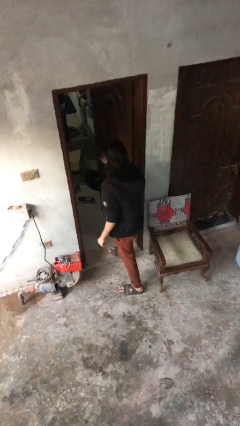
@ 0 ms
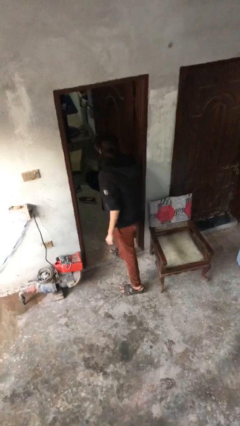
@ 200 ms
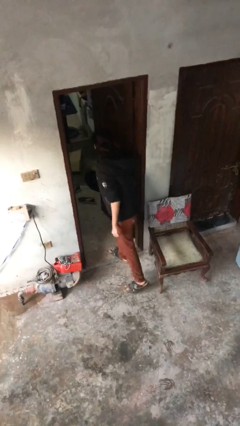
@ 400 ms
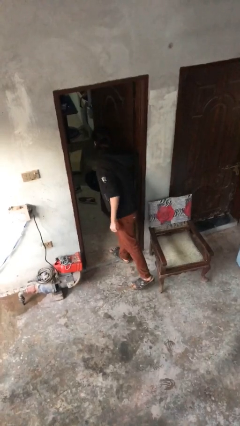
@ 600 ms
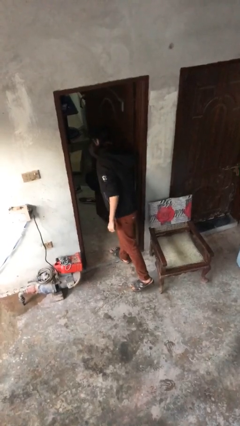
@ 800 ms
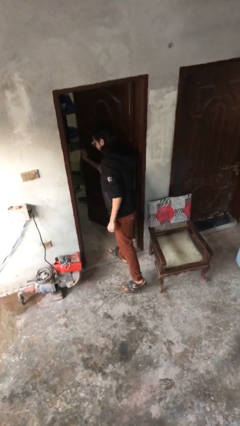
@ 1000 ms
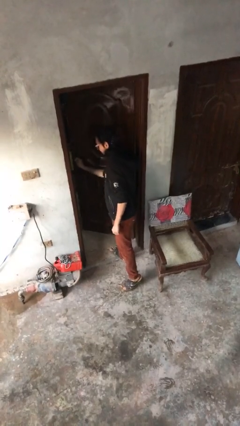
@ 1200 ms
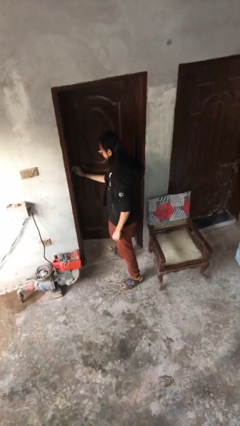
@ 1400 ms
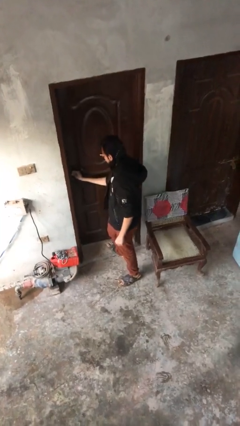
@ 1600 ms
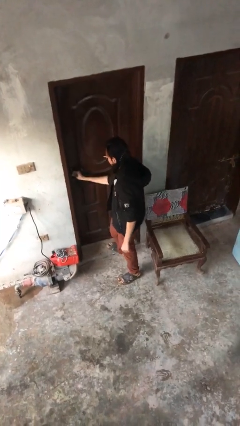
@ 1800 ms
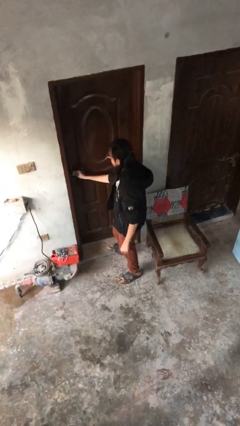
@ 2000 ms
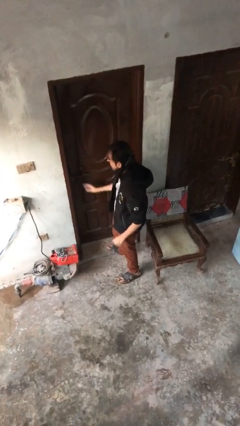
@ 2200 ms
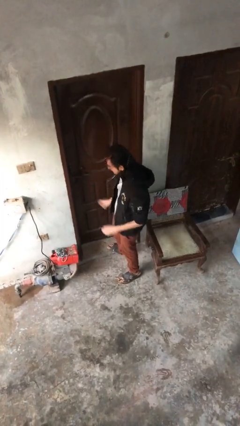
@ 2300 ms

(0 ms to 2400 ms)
person closes facility door

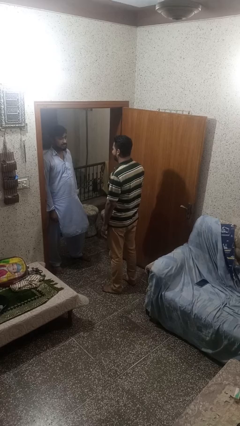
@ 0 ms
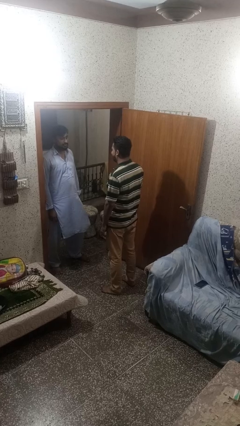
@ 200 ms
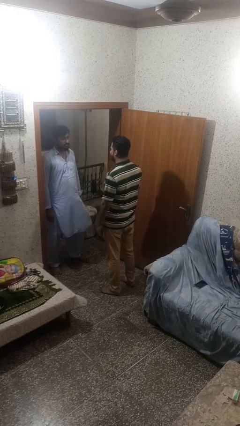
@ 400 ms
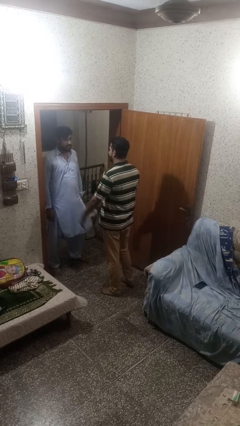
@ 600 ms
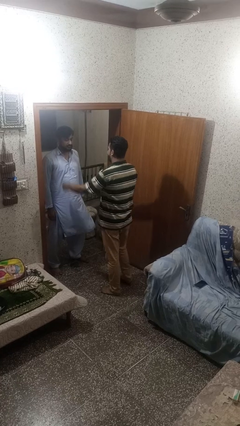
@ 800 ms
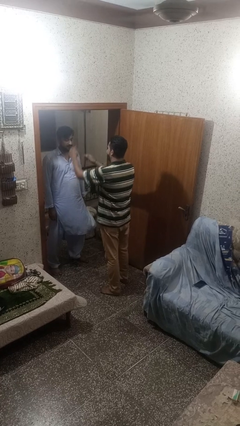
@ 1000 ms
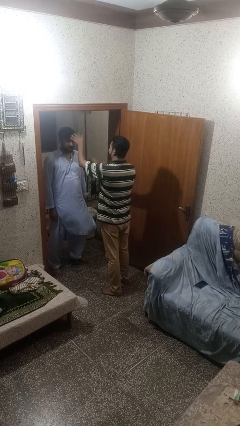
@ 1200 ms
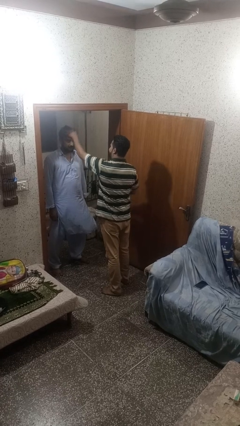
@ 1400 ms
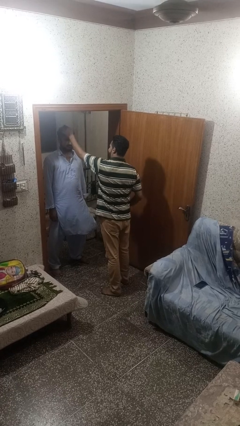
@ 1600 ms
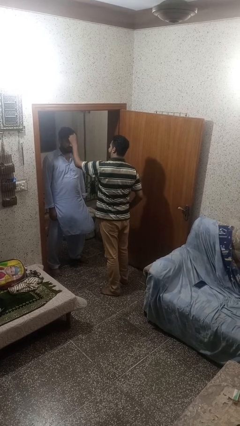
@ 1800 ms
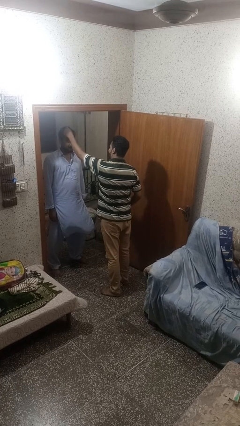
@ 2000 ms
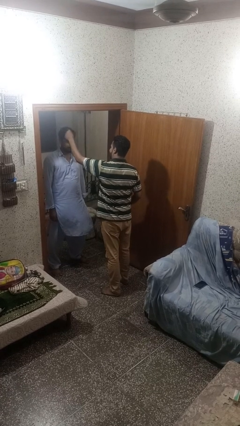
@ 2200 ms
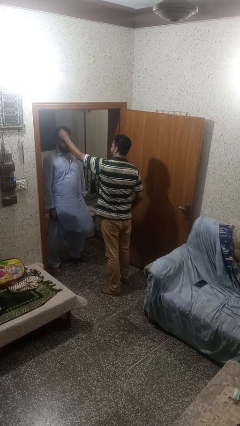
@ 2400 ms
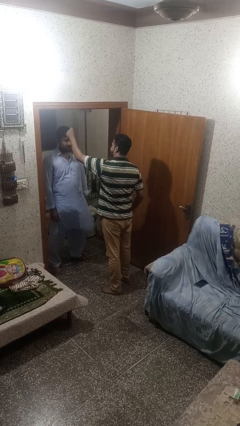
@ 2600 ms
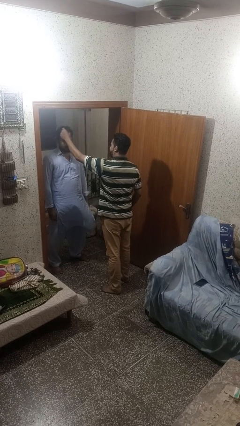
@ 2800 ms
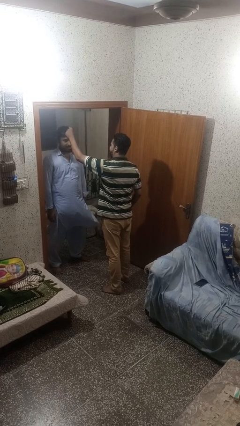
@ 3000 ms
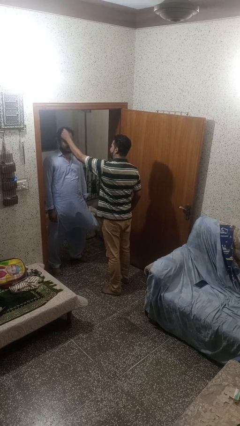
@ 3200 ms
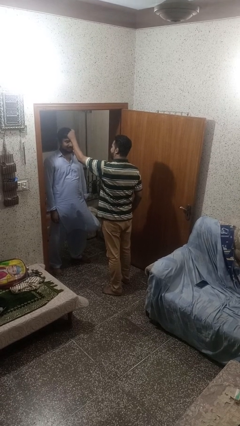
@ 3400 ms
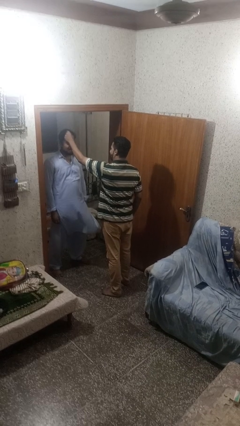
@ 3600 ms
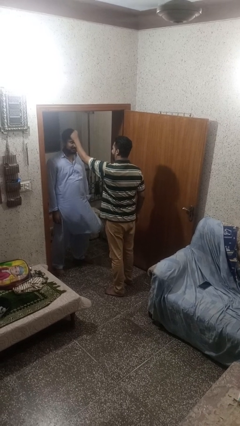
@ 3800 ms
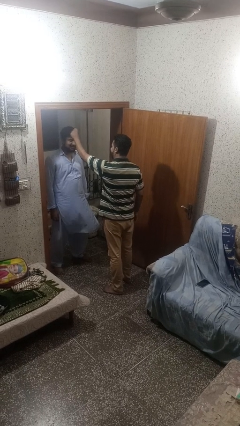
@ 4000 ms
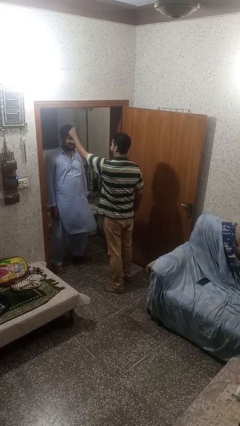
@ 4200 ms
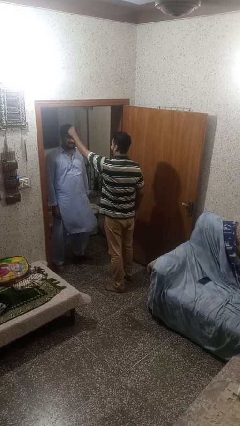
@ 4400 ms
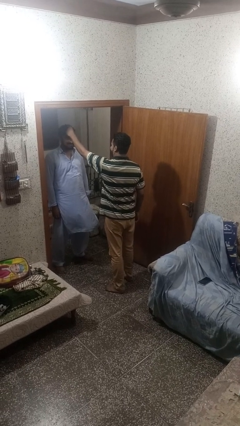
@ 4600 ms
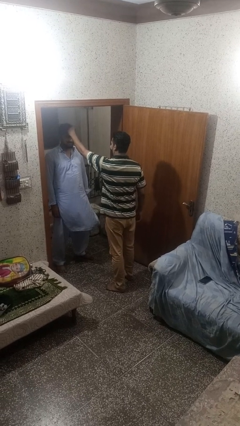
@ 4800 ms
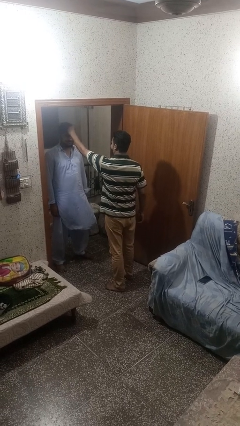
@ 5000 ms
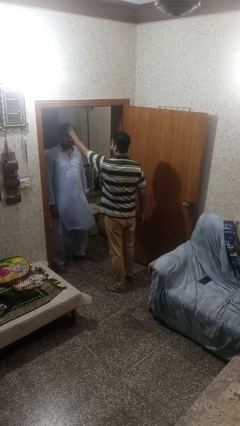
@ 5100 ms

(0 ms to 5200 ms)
person grabs person by hair

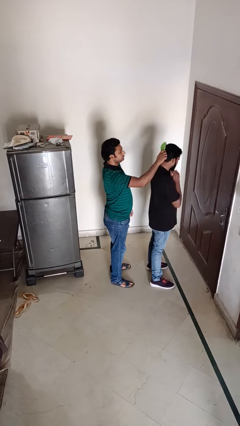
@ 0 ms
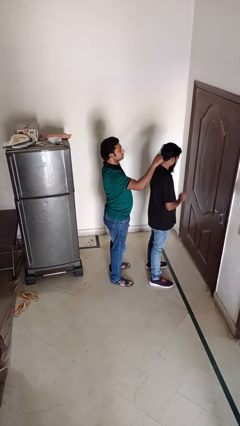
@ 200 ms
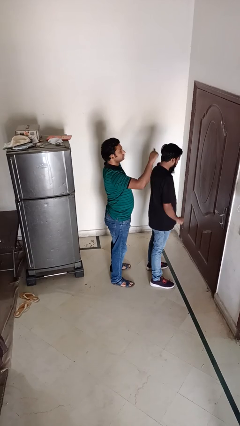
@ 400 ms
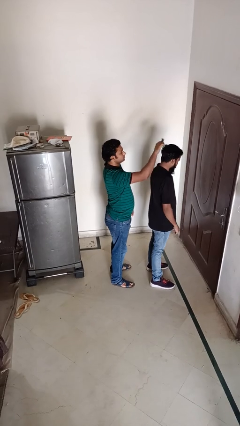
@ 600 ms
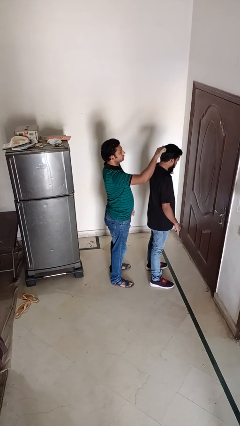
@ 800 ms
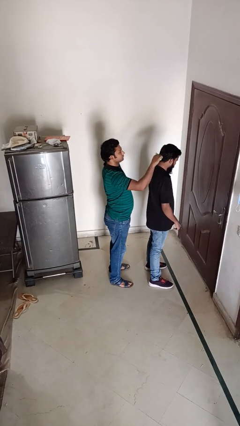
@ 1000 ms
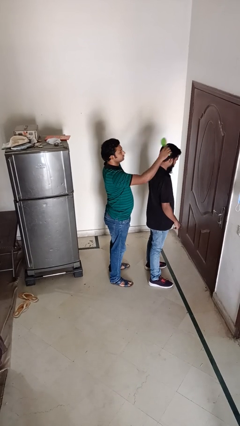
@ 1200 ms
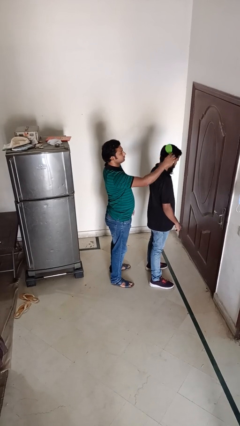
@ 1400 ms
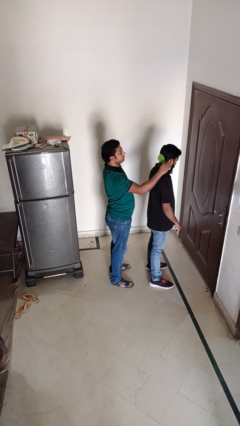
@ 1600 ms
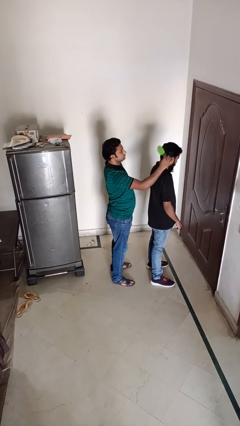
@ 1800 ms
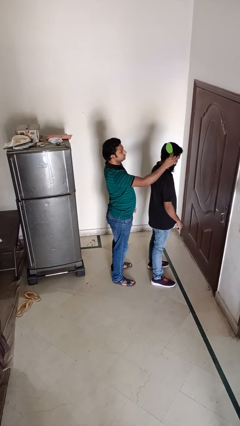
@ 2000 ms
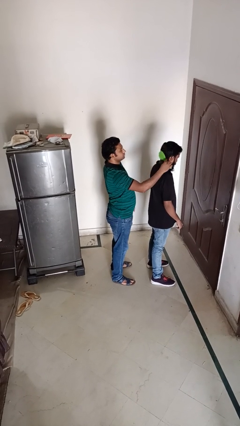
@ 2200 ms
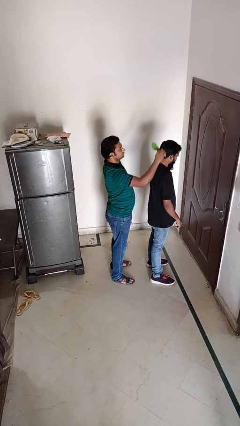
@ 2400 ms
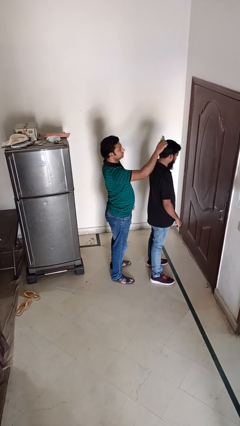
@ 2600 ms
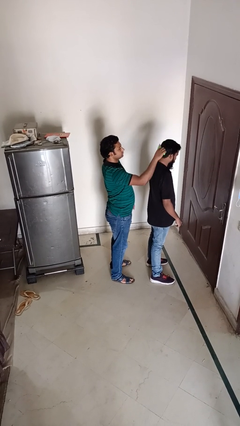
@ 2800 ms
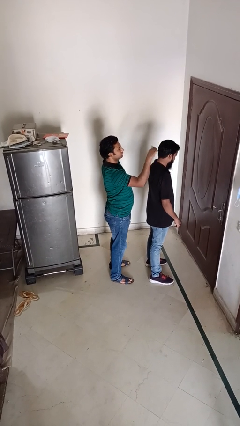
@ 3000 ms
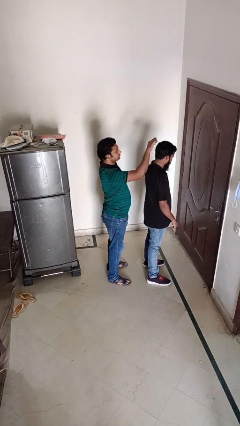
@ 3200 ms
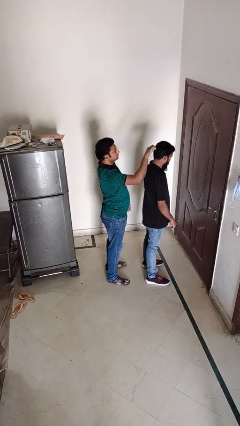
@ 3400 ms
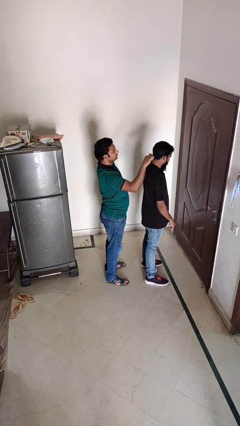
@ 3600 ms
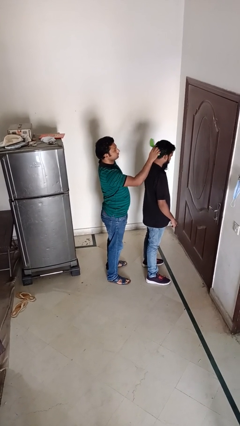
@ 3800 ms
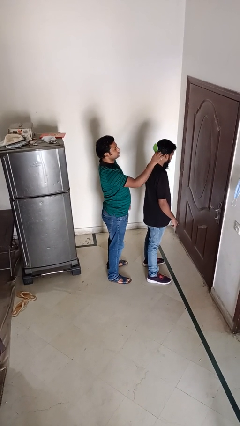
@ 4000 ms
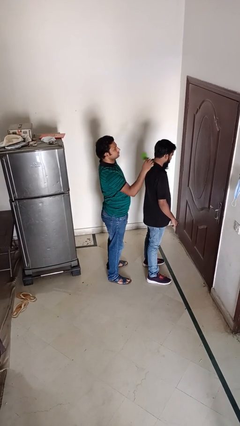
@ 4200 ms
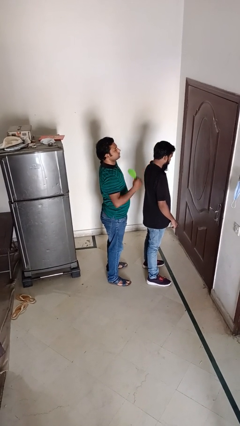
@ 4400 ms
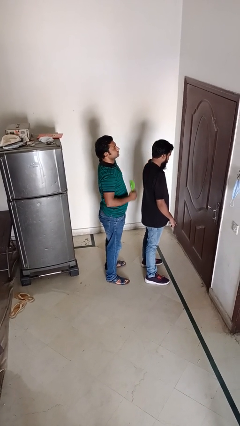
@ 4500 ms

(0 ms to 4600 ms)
person brushes hair of person

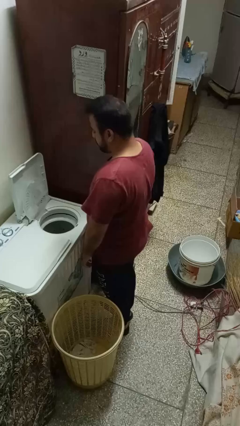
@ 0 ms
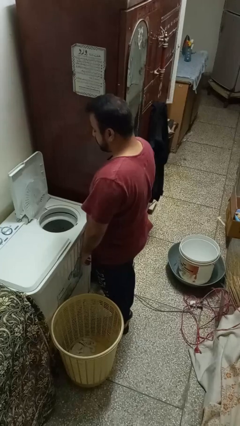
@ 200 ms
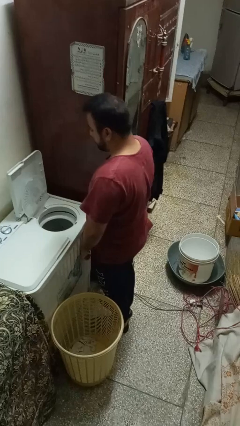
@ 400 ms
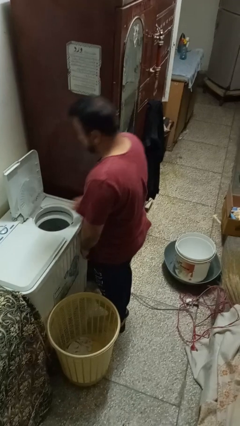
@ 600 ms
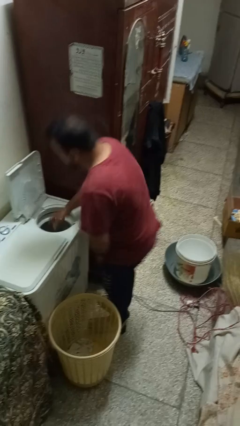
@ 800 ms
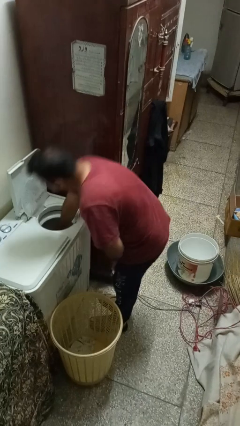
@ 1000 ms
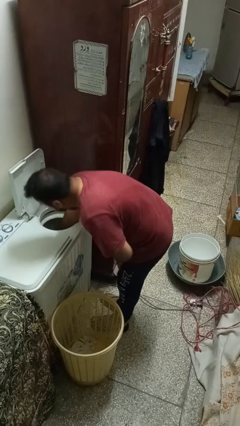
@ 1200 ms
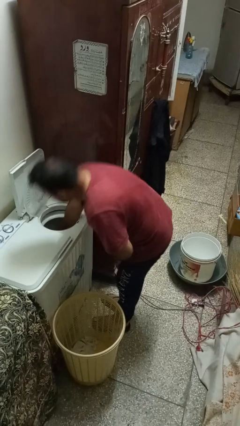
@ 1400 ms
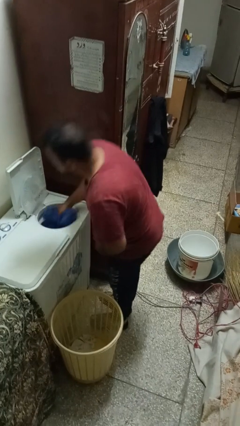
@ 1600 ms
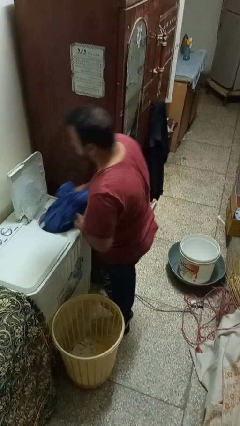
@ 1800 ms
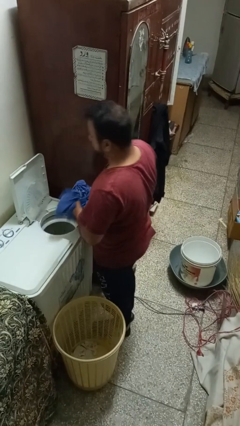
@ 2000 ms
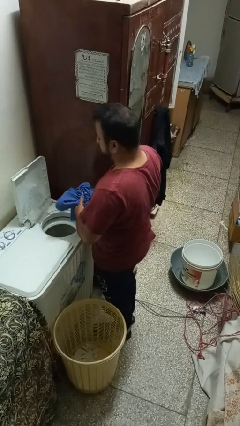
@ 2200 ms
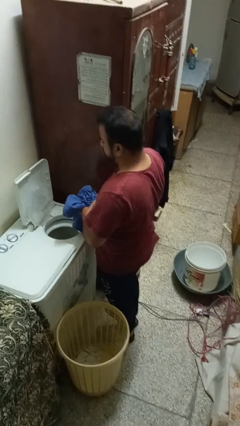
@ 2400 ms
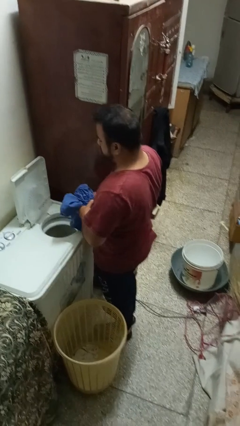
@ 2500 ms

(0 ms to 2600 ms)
person unloads dryer

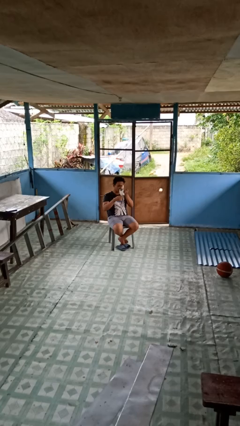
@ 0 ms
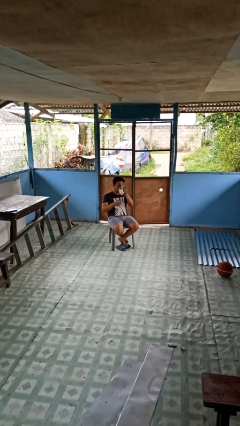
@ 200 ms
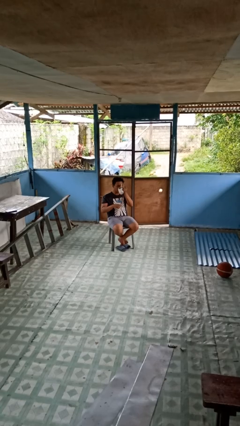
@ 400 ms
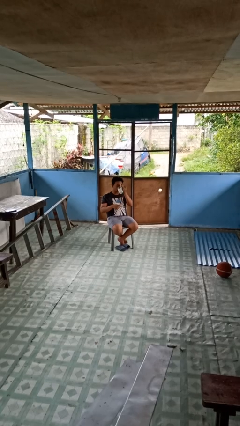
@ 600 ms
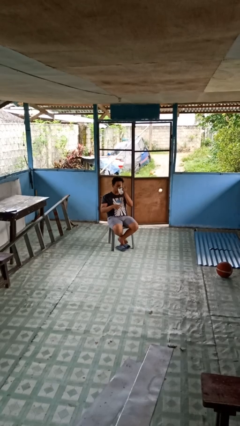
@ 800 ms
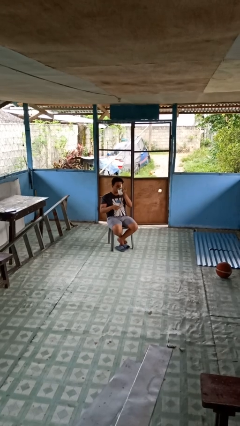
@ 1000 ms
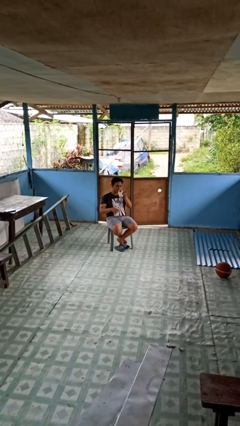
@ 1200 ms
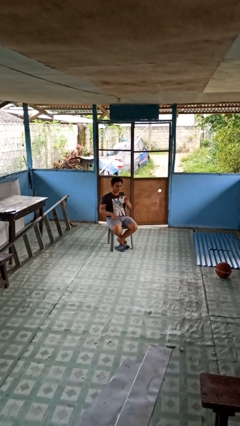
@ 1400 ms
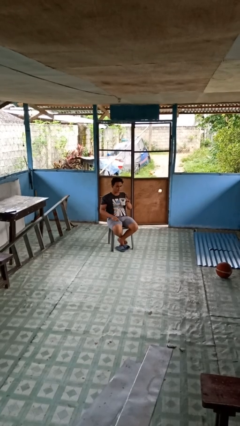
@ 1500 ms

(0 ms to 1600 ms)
person drinks from mug

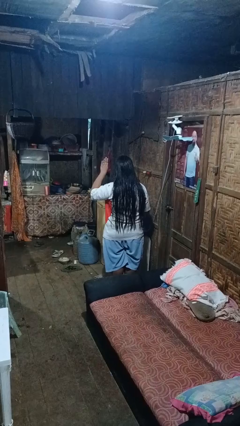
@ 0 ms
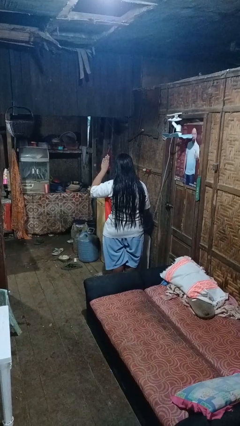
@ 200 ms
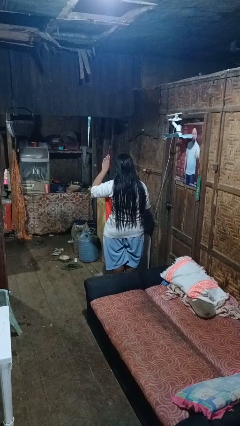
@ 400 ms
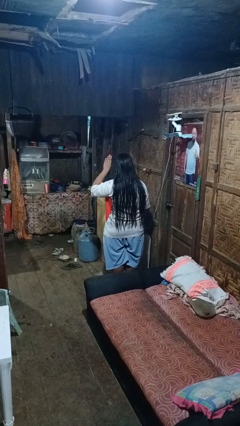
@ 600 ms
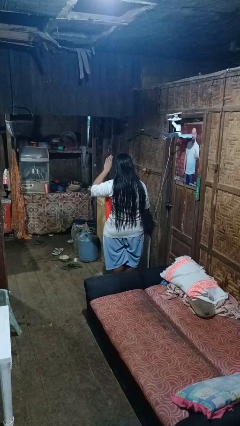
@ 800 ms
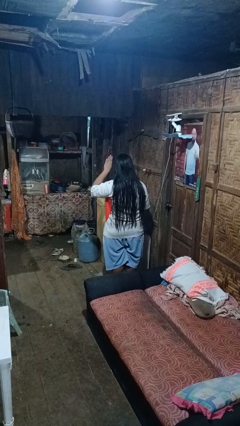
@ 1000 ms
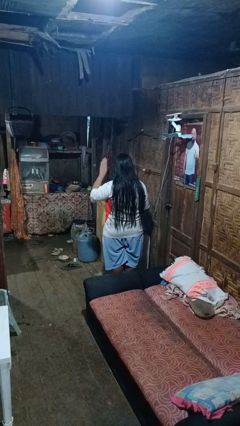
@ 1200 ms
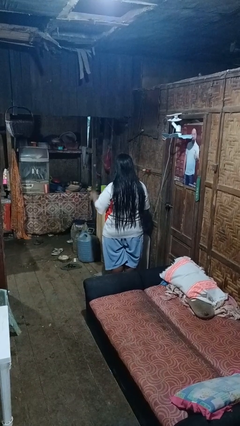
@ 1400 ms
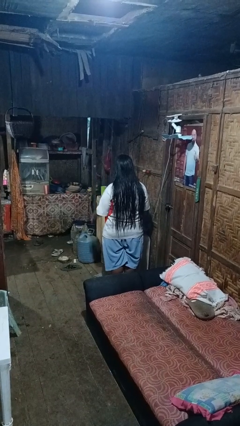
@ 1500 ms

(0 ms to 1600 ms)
person gestures number four
